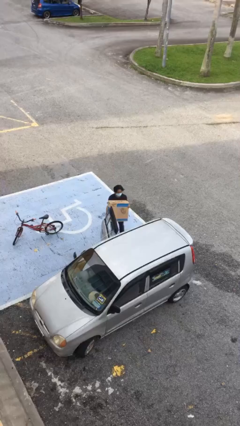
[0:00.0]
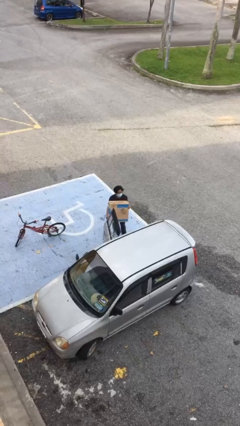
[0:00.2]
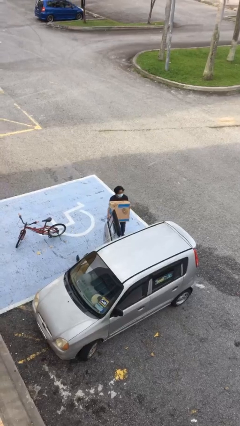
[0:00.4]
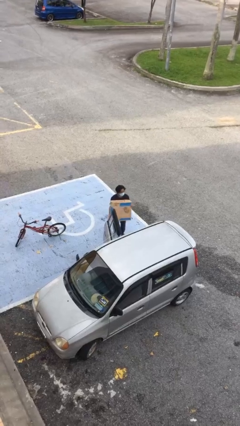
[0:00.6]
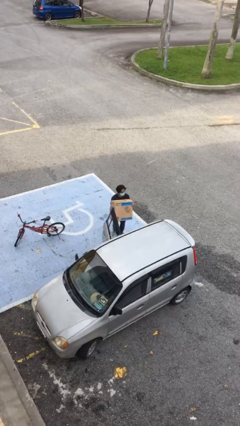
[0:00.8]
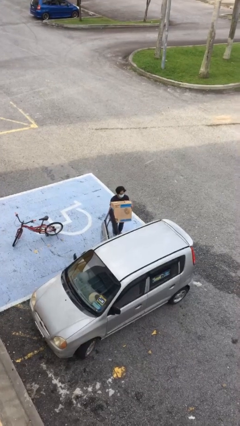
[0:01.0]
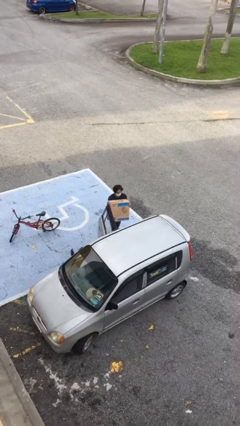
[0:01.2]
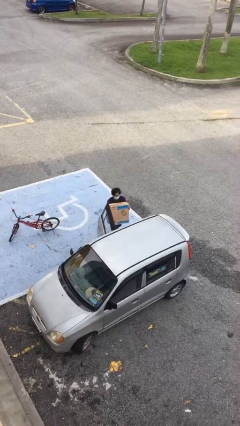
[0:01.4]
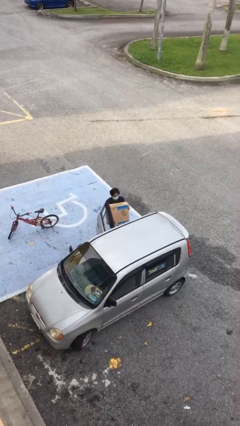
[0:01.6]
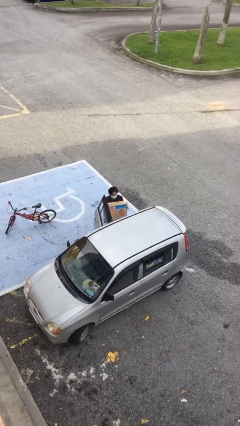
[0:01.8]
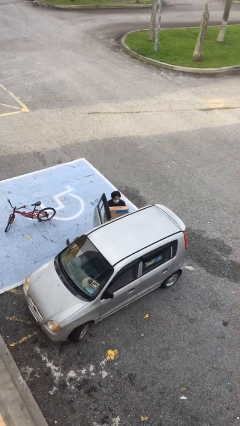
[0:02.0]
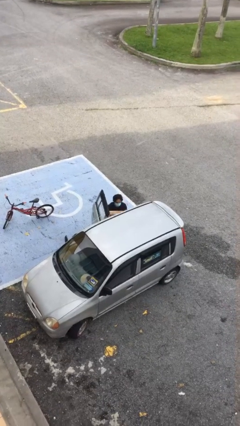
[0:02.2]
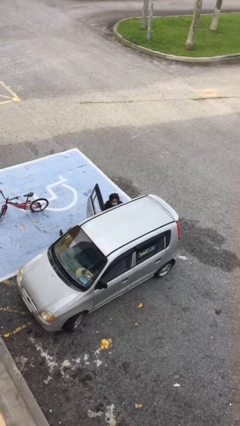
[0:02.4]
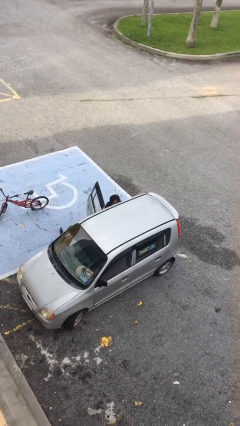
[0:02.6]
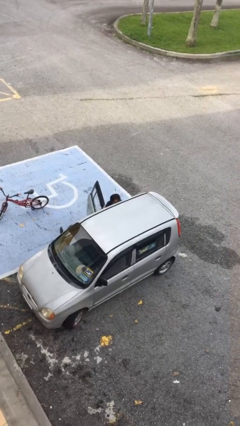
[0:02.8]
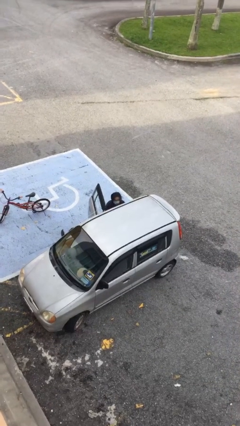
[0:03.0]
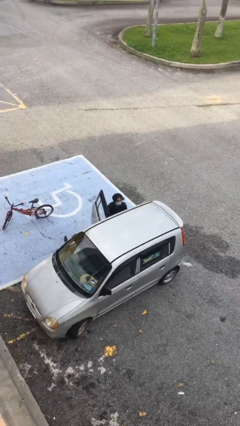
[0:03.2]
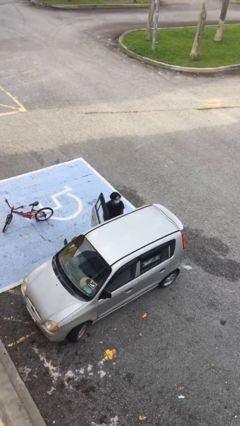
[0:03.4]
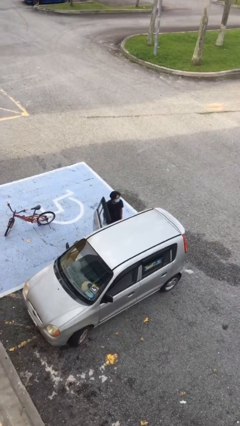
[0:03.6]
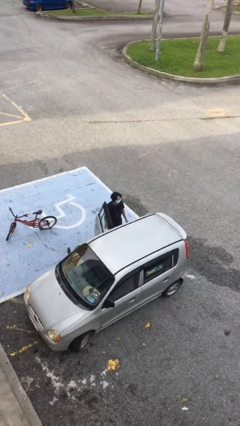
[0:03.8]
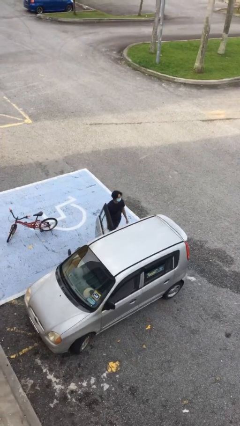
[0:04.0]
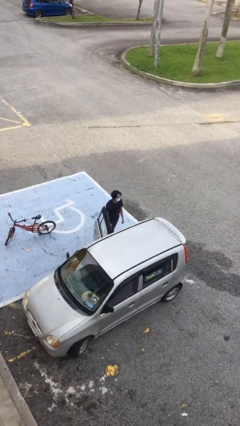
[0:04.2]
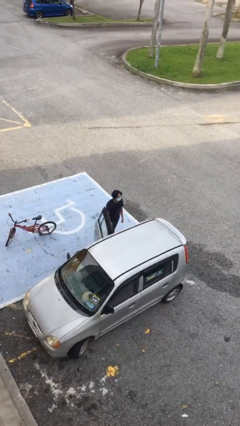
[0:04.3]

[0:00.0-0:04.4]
person loads car

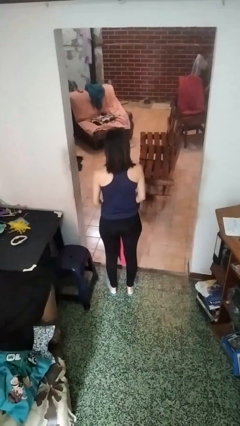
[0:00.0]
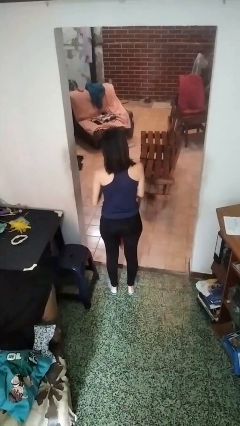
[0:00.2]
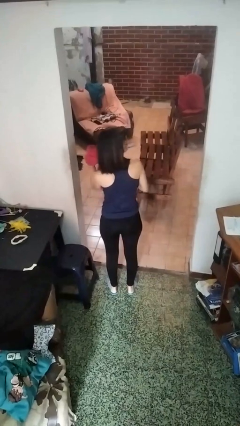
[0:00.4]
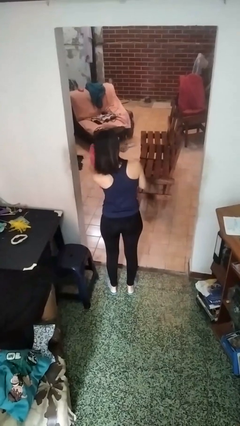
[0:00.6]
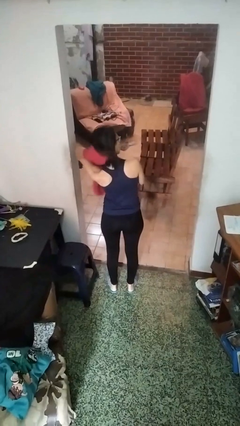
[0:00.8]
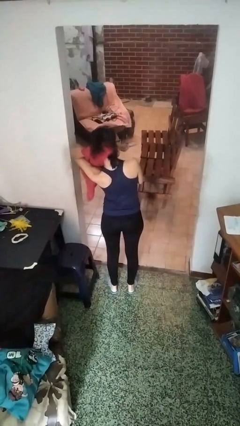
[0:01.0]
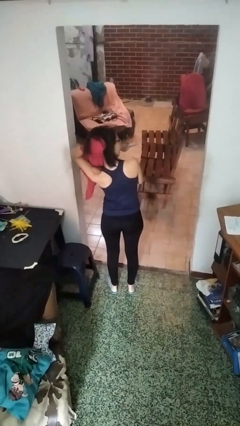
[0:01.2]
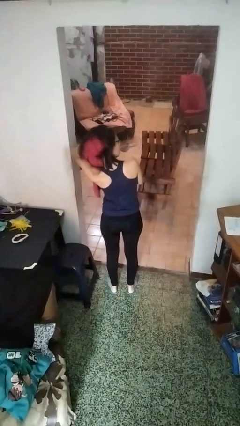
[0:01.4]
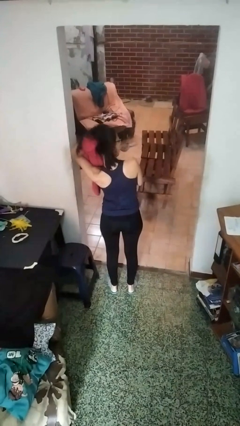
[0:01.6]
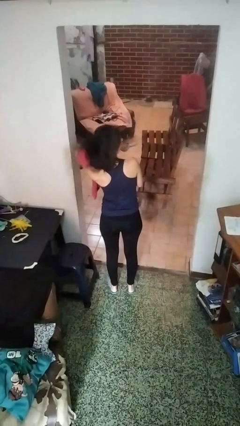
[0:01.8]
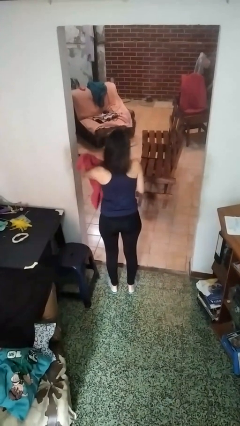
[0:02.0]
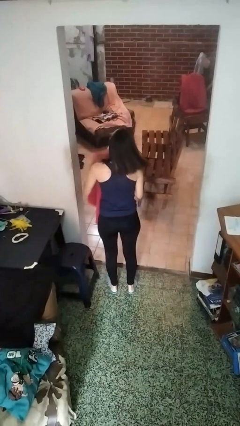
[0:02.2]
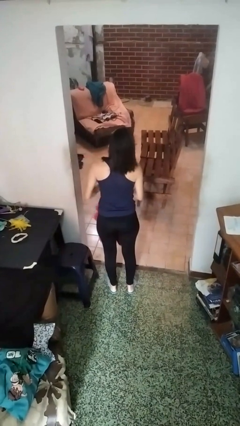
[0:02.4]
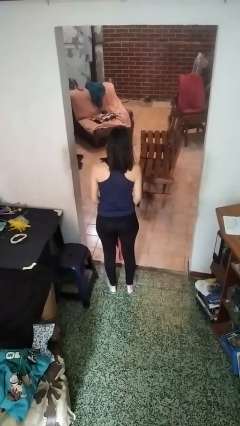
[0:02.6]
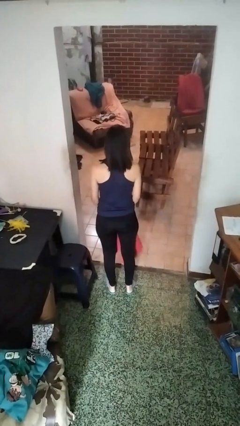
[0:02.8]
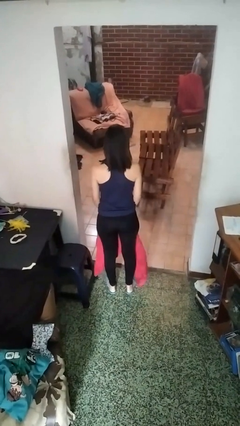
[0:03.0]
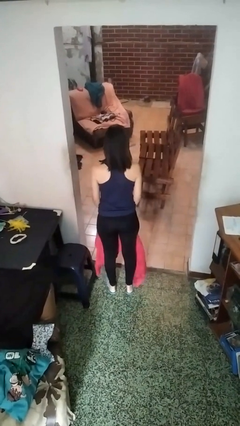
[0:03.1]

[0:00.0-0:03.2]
person dries hair with towel

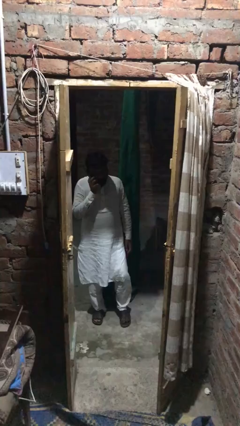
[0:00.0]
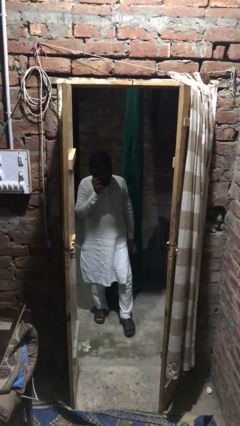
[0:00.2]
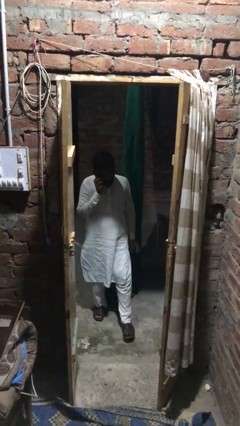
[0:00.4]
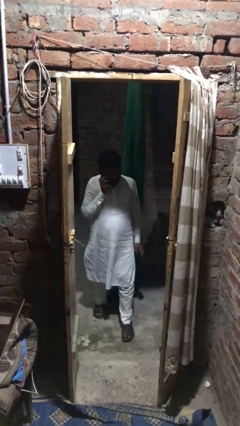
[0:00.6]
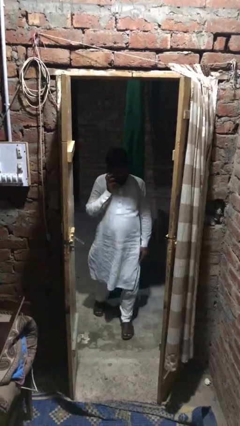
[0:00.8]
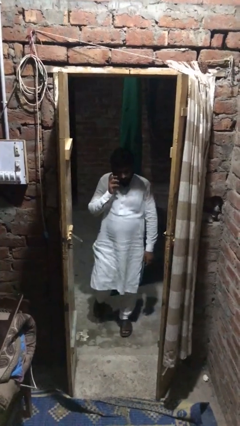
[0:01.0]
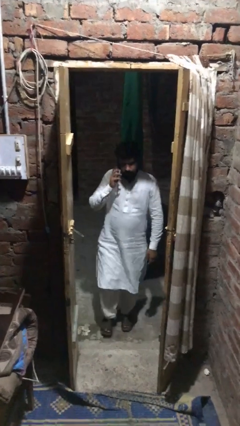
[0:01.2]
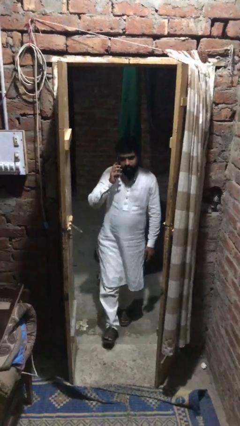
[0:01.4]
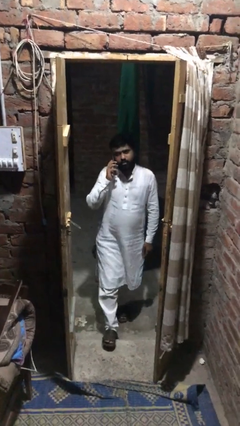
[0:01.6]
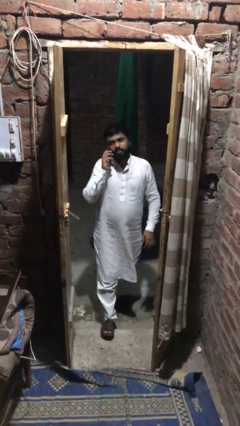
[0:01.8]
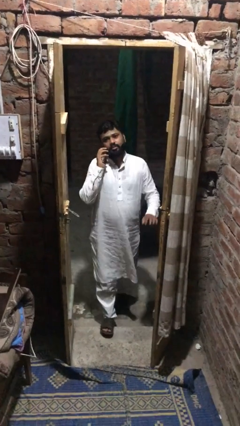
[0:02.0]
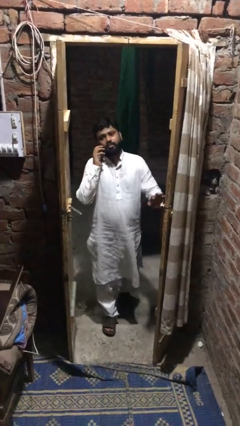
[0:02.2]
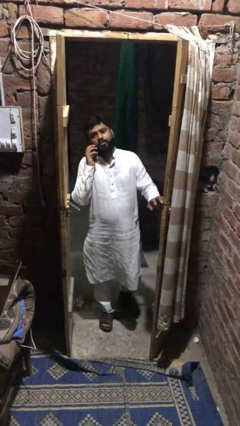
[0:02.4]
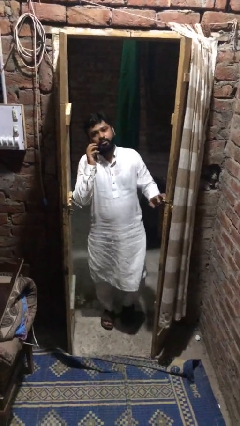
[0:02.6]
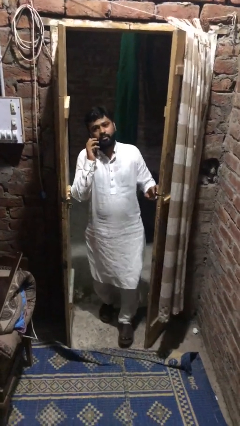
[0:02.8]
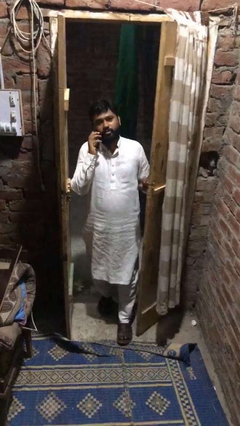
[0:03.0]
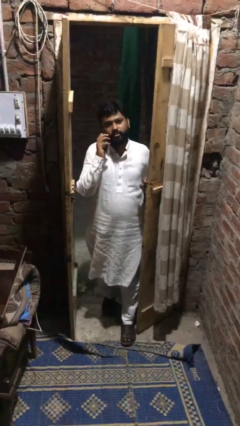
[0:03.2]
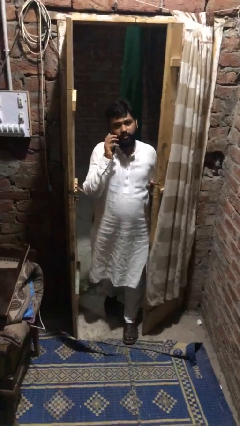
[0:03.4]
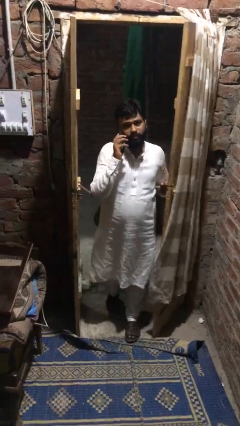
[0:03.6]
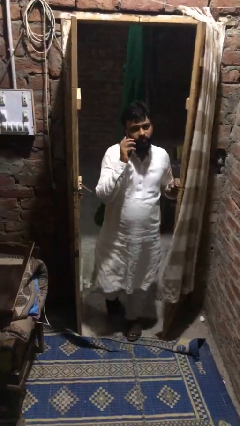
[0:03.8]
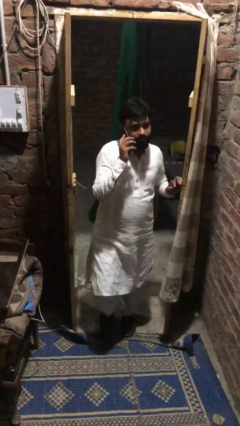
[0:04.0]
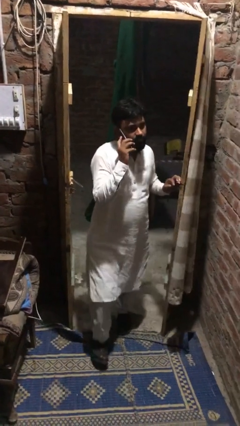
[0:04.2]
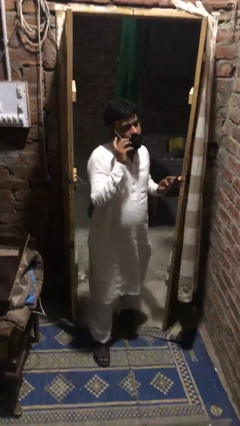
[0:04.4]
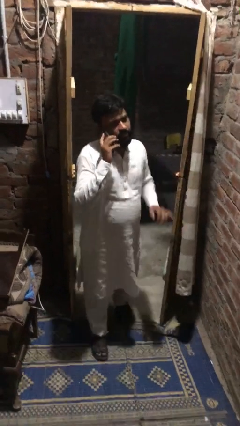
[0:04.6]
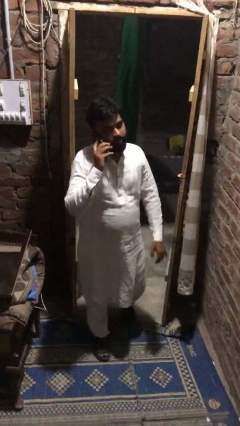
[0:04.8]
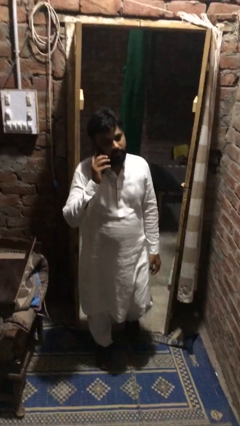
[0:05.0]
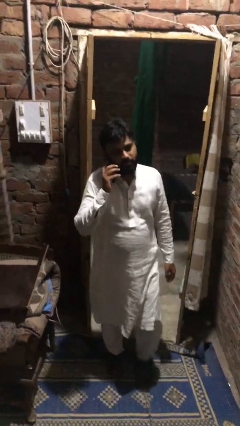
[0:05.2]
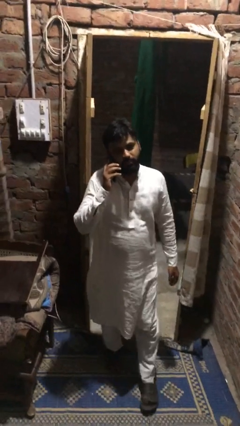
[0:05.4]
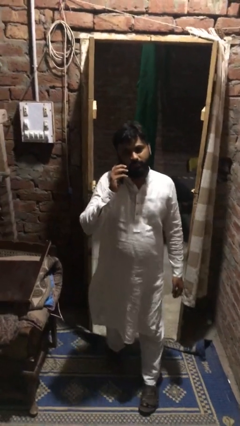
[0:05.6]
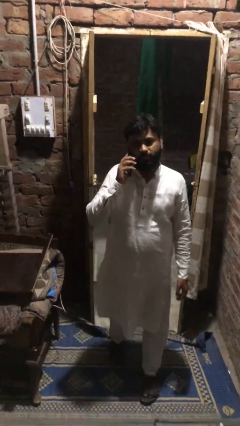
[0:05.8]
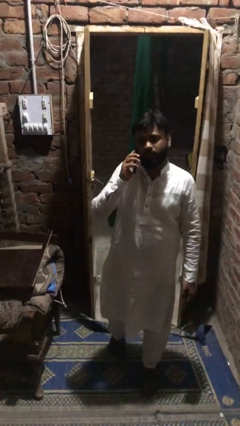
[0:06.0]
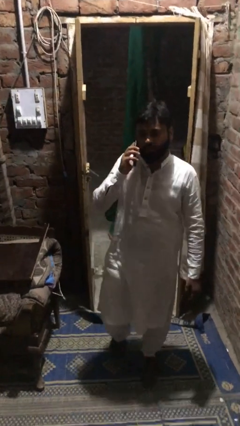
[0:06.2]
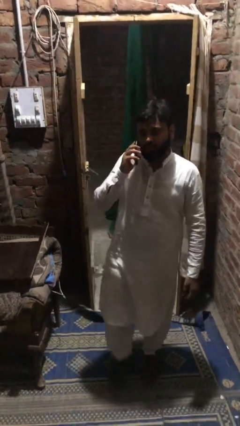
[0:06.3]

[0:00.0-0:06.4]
person enters scene through structure

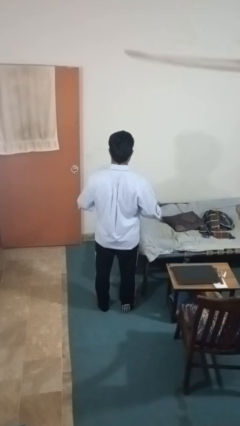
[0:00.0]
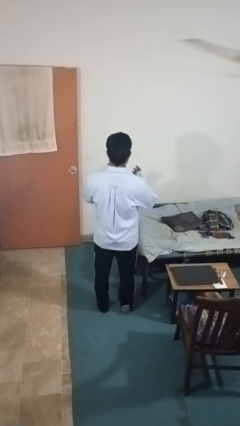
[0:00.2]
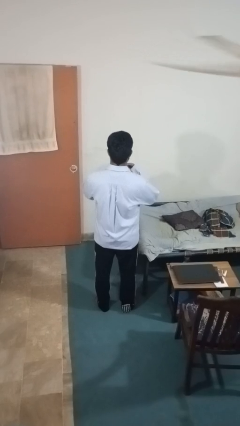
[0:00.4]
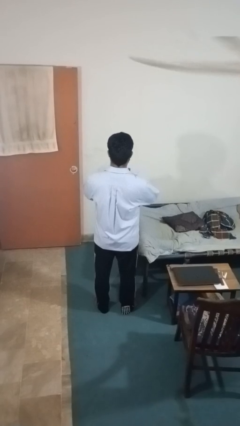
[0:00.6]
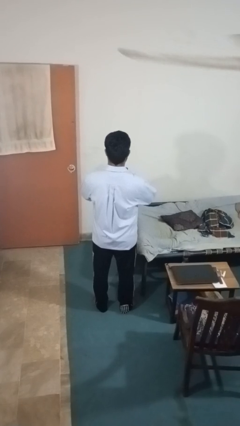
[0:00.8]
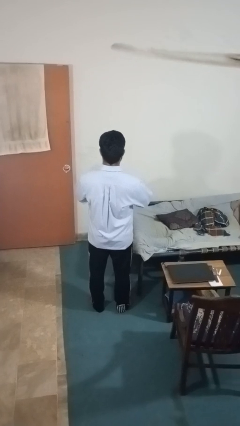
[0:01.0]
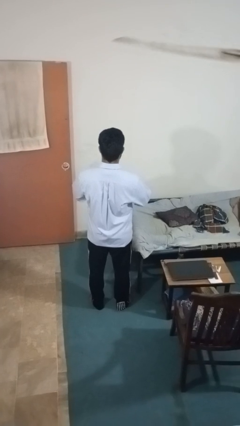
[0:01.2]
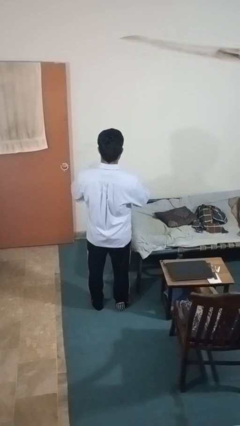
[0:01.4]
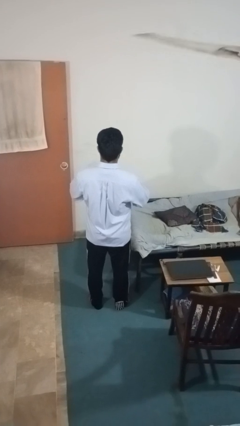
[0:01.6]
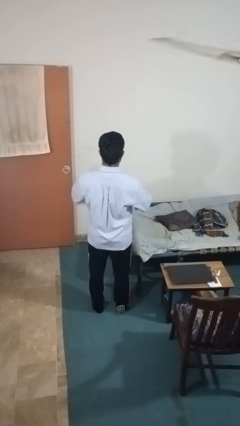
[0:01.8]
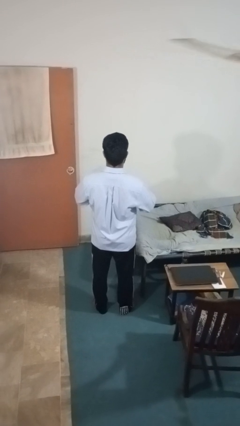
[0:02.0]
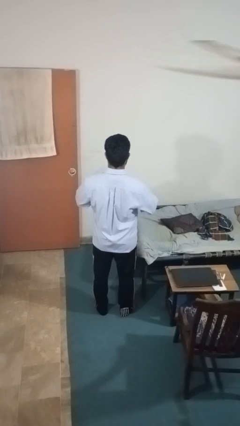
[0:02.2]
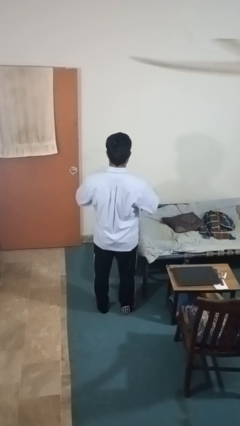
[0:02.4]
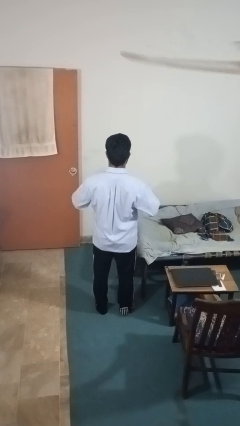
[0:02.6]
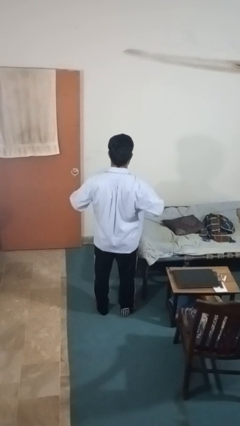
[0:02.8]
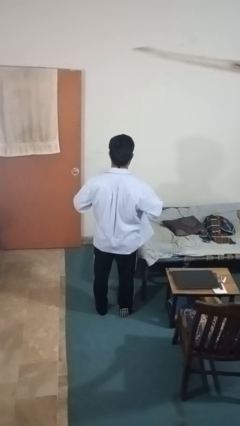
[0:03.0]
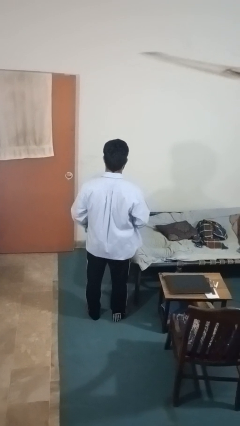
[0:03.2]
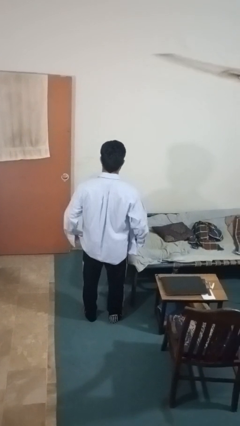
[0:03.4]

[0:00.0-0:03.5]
person unbuttons shirt
